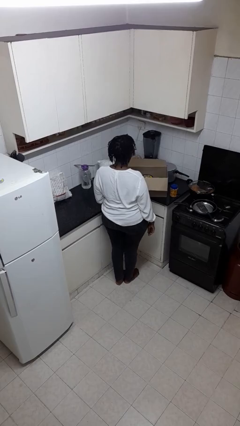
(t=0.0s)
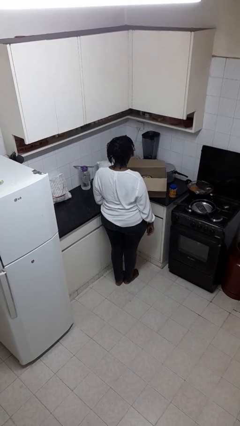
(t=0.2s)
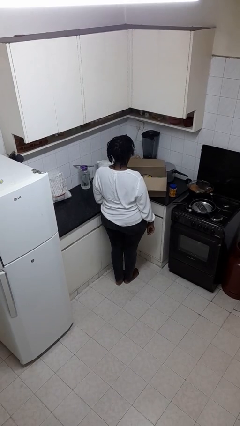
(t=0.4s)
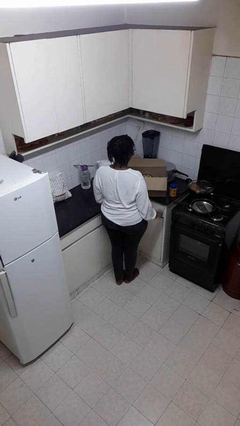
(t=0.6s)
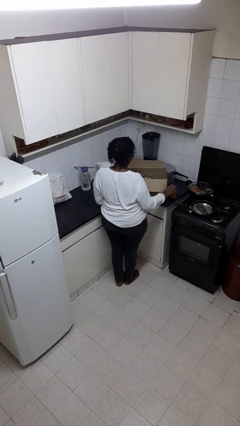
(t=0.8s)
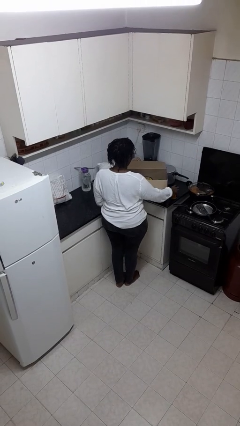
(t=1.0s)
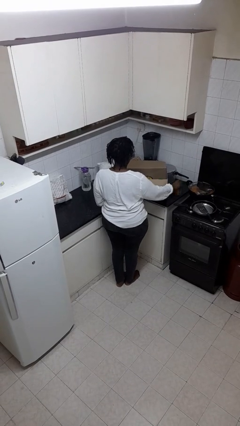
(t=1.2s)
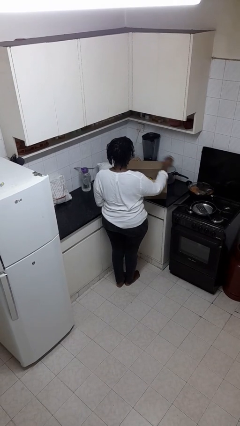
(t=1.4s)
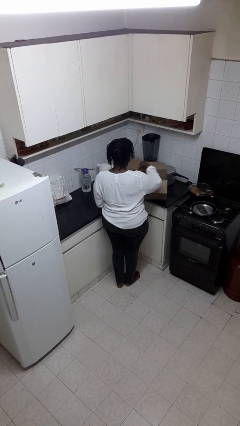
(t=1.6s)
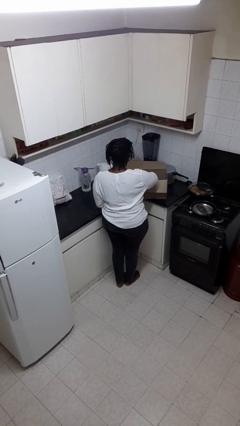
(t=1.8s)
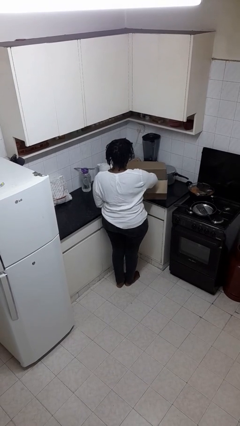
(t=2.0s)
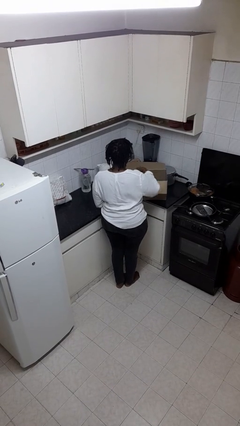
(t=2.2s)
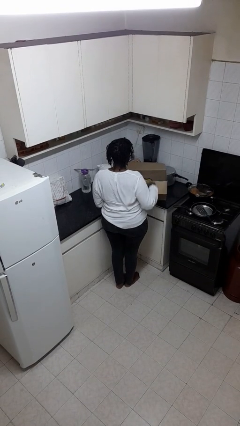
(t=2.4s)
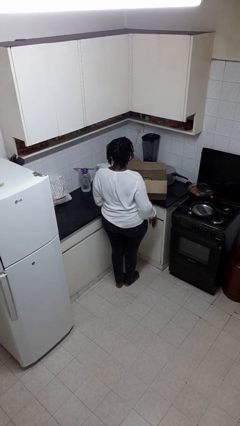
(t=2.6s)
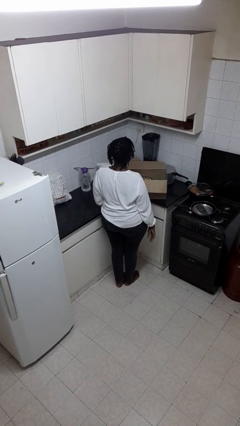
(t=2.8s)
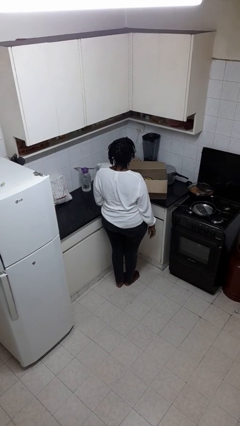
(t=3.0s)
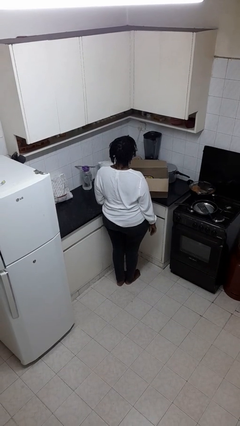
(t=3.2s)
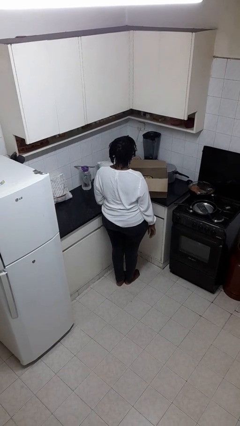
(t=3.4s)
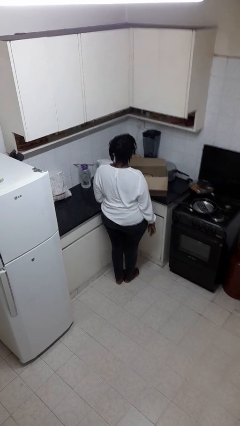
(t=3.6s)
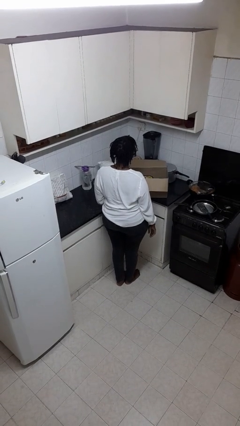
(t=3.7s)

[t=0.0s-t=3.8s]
person puts object into box

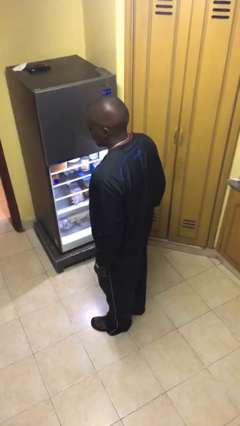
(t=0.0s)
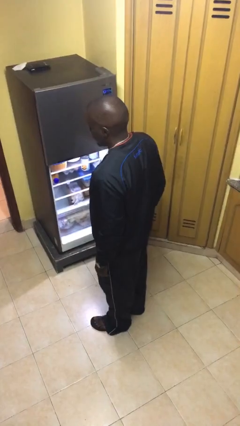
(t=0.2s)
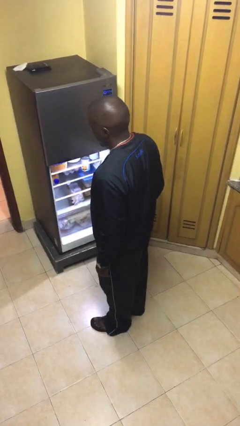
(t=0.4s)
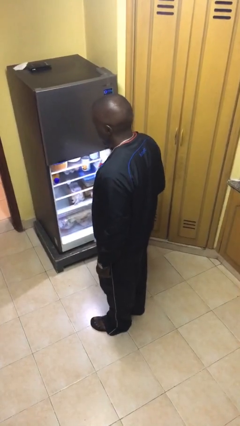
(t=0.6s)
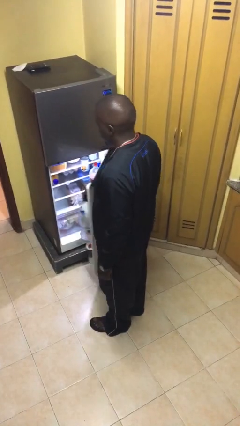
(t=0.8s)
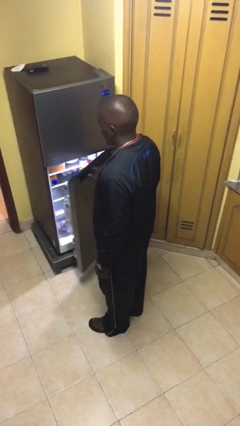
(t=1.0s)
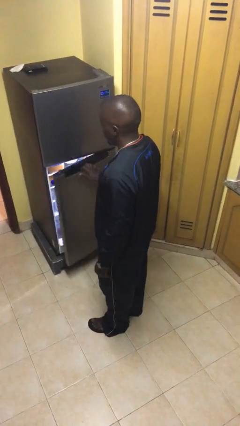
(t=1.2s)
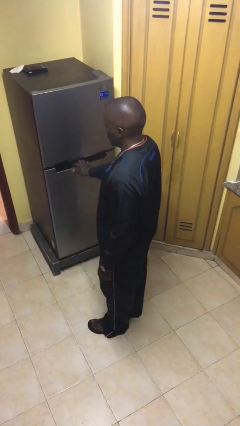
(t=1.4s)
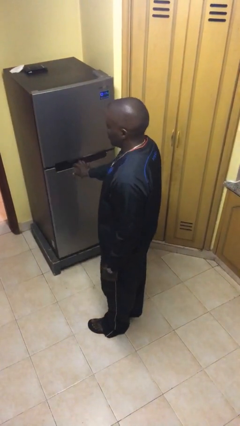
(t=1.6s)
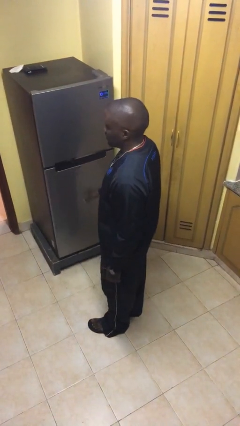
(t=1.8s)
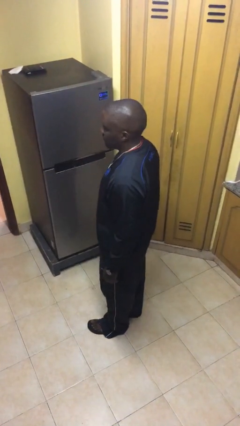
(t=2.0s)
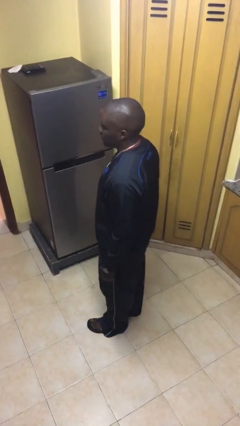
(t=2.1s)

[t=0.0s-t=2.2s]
person closes refrigerator

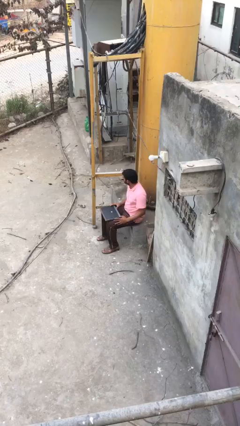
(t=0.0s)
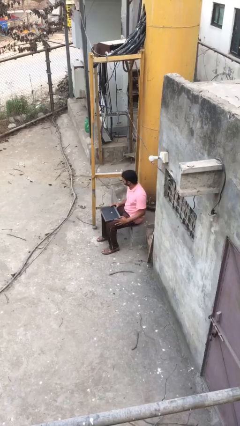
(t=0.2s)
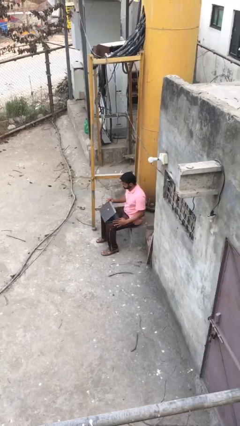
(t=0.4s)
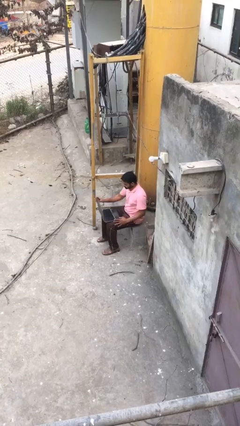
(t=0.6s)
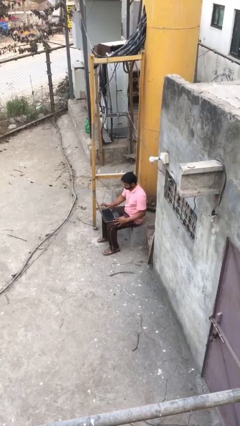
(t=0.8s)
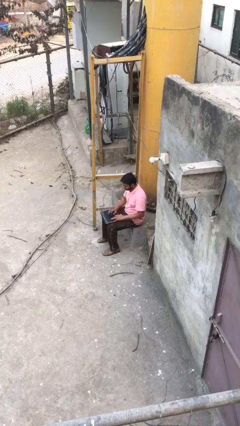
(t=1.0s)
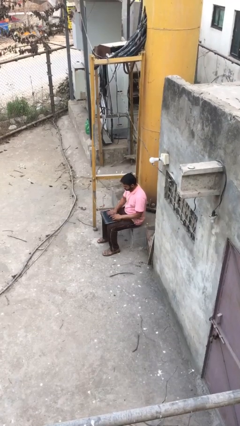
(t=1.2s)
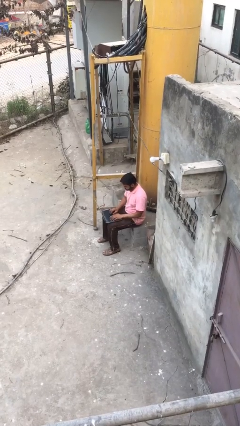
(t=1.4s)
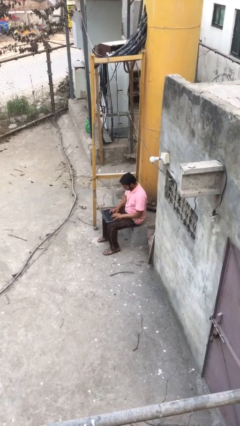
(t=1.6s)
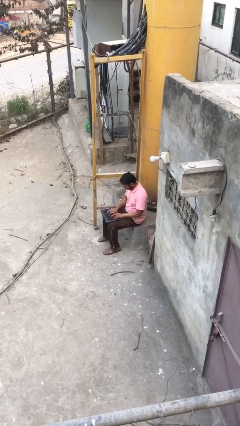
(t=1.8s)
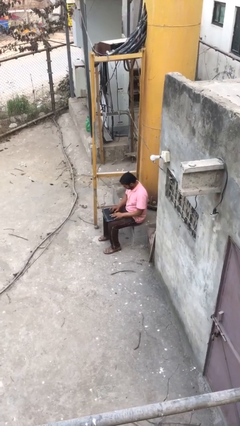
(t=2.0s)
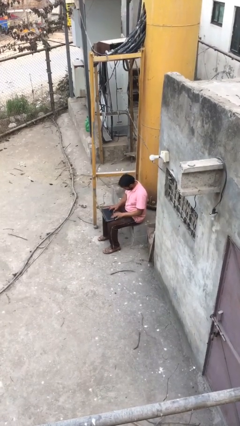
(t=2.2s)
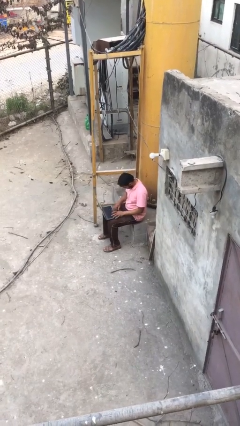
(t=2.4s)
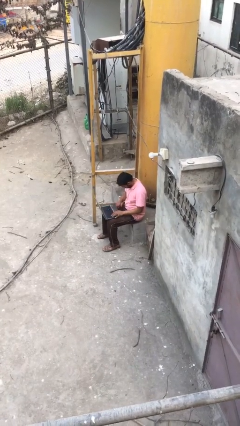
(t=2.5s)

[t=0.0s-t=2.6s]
person interacts with laptop

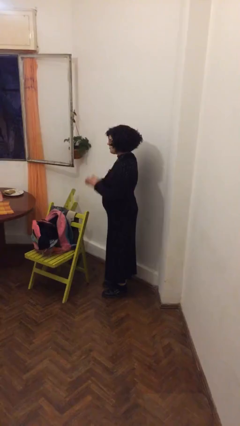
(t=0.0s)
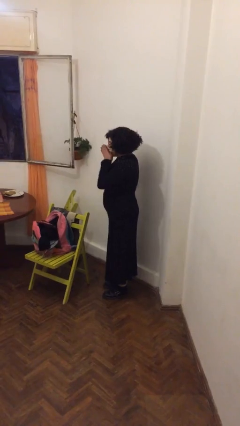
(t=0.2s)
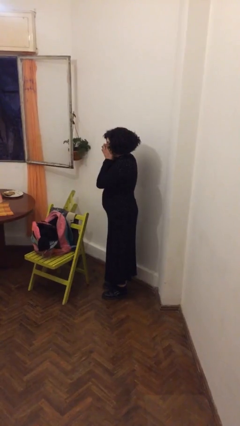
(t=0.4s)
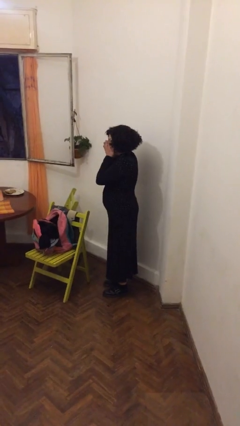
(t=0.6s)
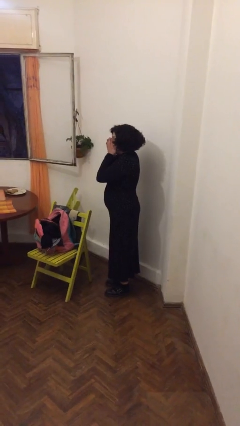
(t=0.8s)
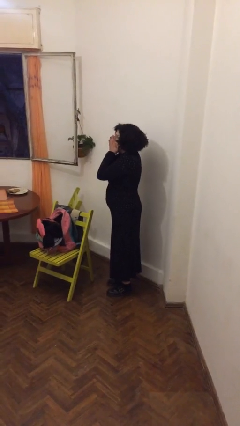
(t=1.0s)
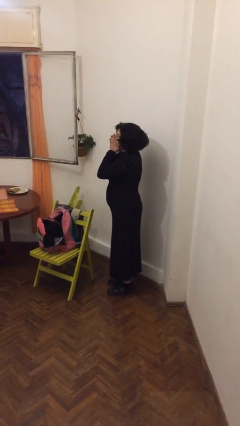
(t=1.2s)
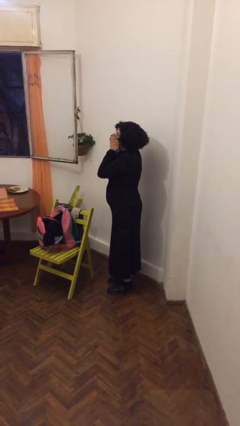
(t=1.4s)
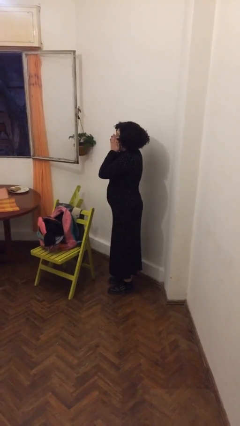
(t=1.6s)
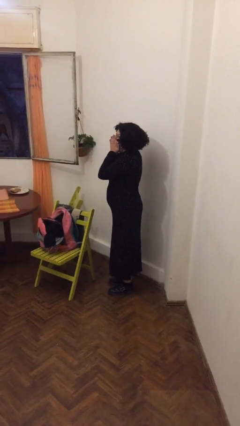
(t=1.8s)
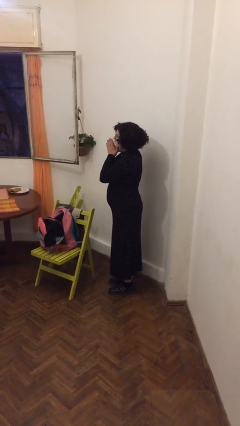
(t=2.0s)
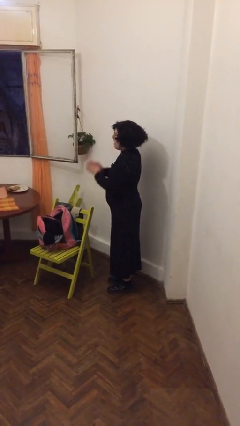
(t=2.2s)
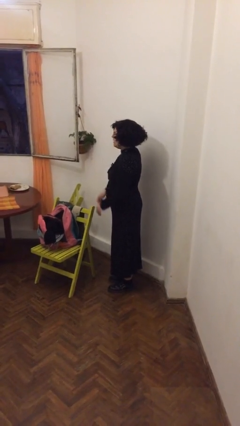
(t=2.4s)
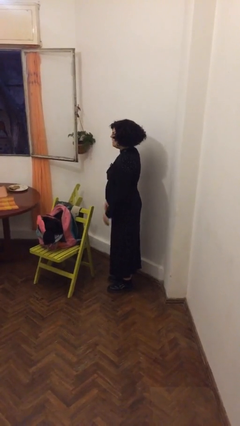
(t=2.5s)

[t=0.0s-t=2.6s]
person yawns

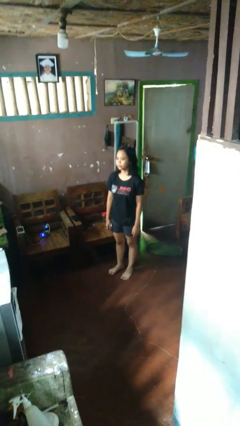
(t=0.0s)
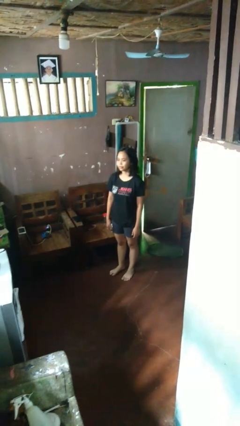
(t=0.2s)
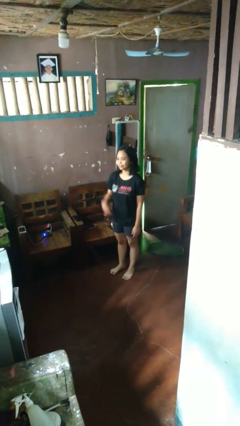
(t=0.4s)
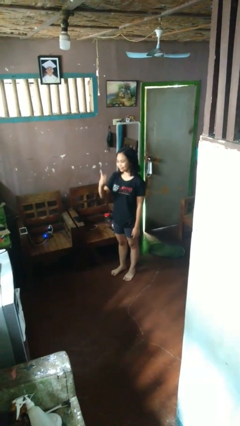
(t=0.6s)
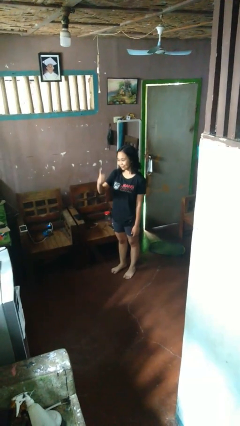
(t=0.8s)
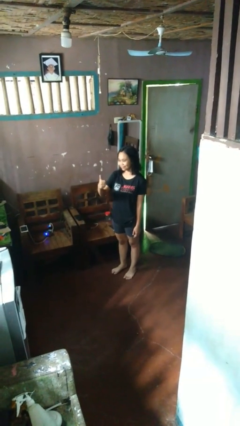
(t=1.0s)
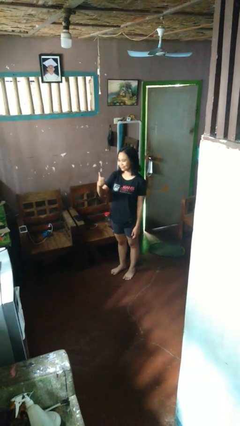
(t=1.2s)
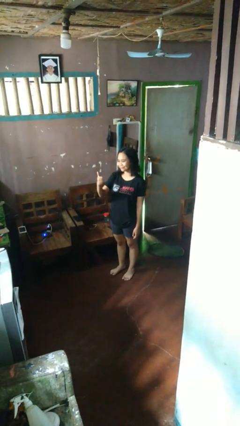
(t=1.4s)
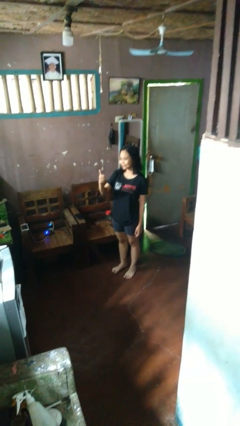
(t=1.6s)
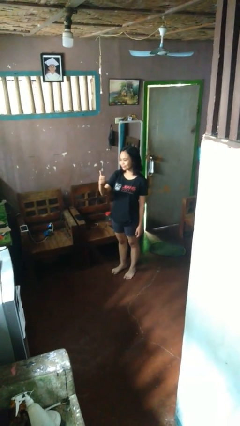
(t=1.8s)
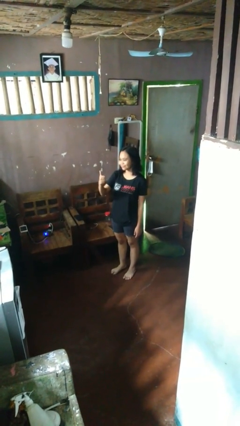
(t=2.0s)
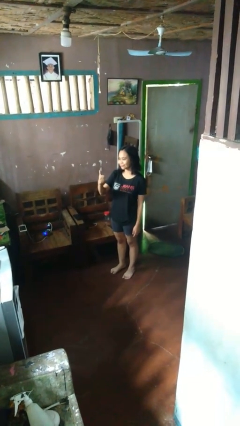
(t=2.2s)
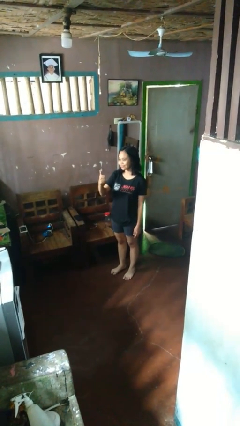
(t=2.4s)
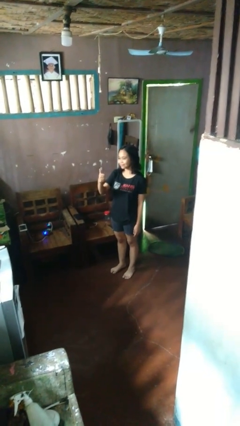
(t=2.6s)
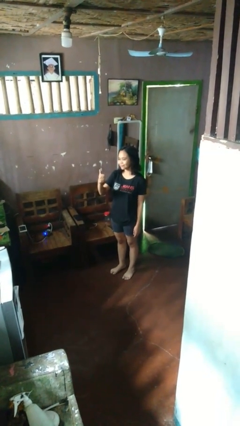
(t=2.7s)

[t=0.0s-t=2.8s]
person gestures thumbs up

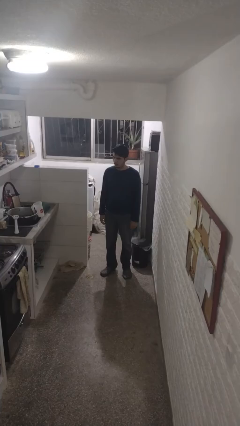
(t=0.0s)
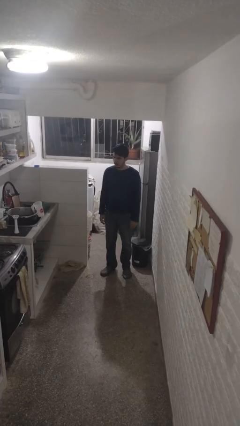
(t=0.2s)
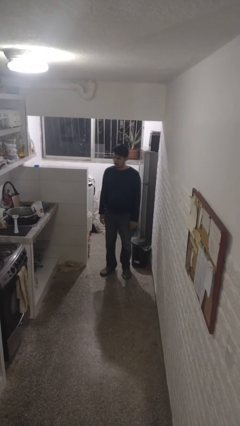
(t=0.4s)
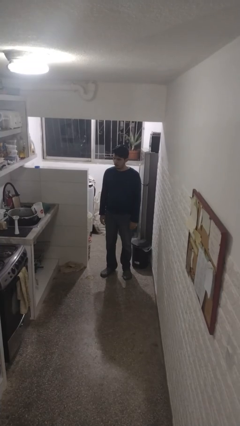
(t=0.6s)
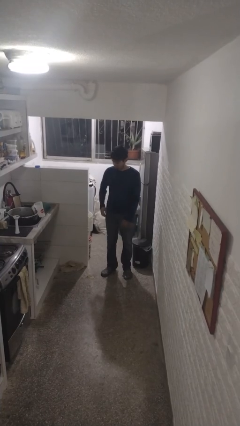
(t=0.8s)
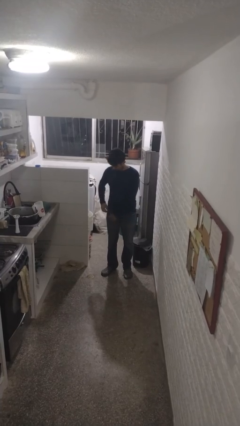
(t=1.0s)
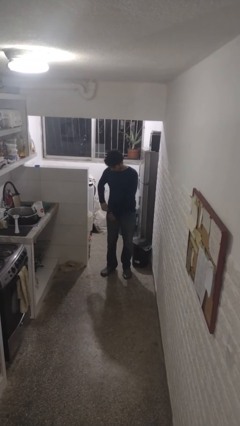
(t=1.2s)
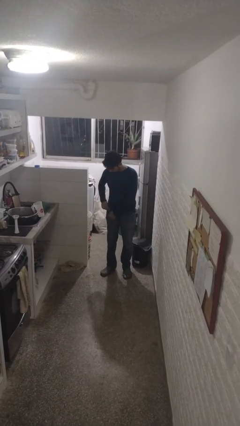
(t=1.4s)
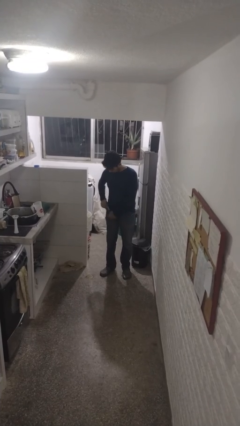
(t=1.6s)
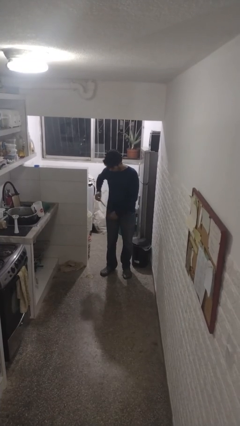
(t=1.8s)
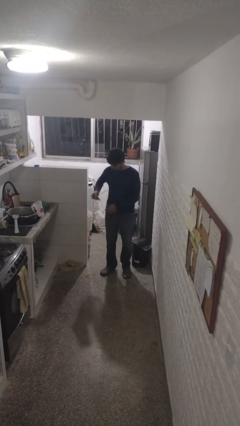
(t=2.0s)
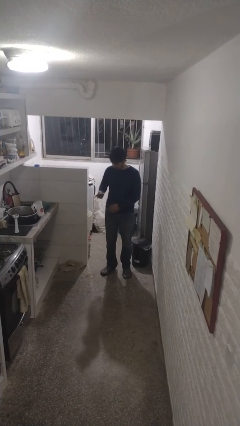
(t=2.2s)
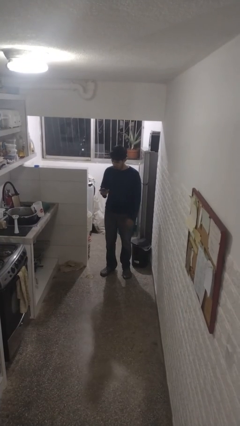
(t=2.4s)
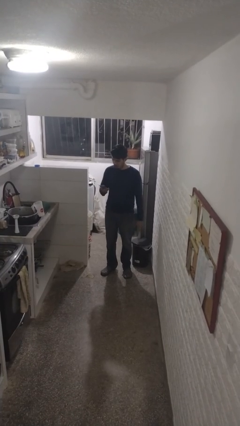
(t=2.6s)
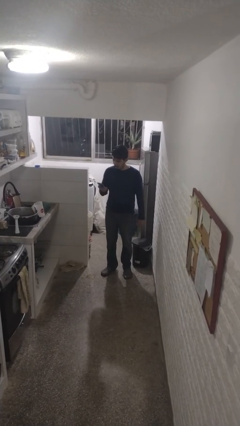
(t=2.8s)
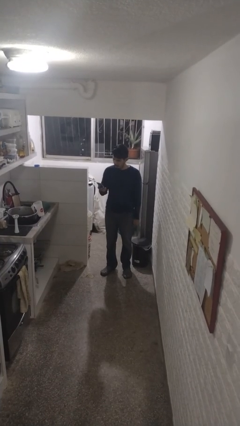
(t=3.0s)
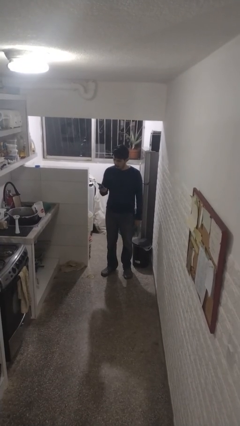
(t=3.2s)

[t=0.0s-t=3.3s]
person takes phone from pocket
